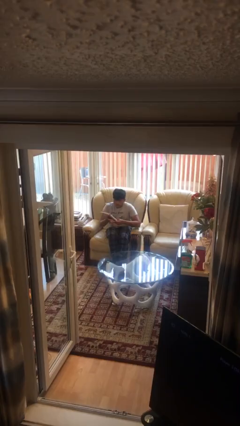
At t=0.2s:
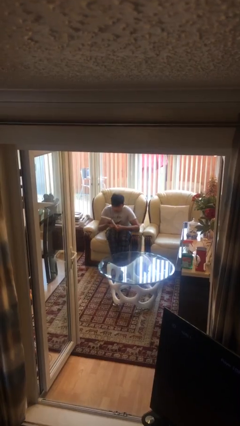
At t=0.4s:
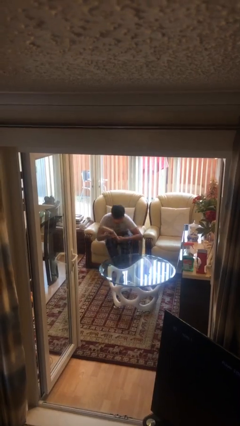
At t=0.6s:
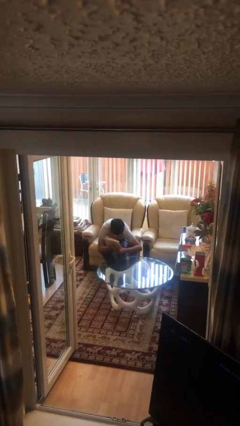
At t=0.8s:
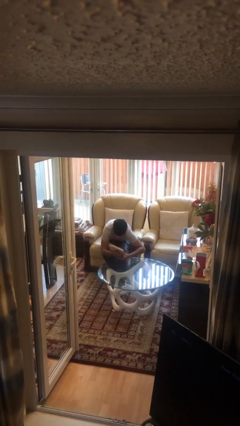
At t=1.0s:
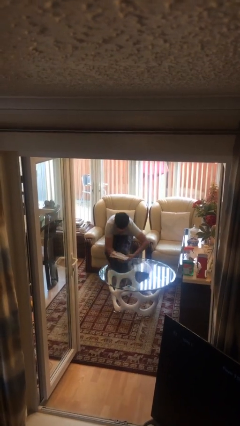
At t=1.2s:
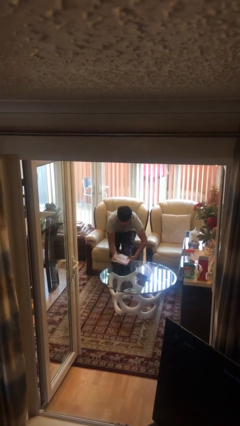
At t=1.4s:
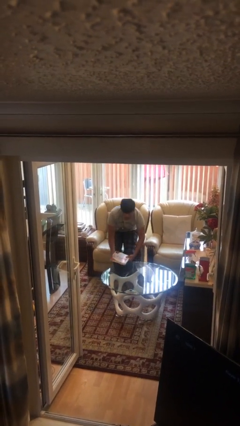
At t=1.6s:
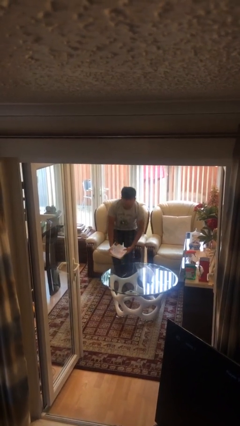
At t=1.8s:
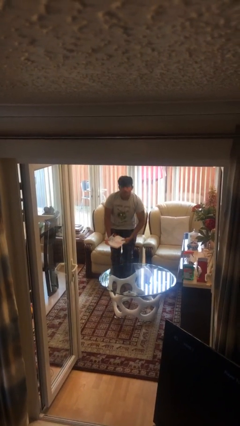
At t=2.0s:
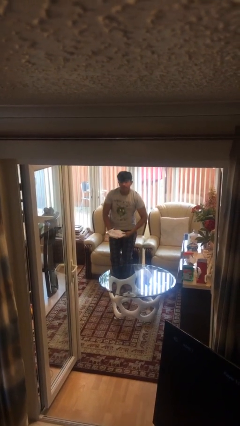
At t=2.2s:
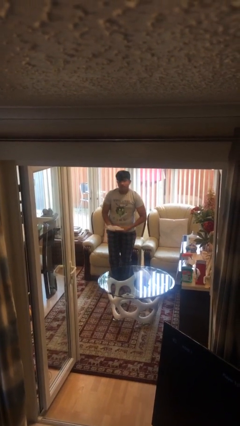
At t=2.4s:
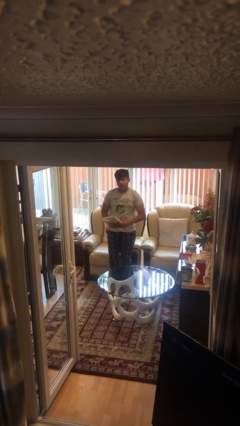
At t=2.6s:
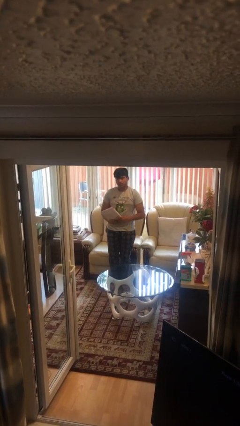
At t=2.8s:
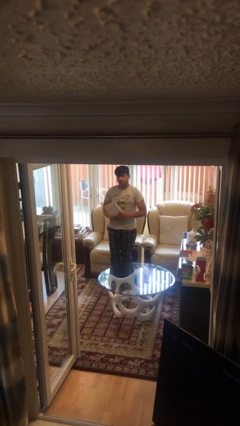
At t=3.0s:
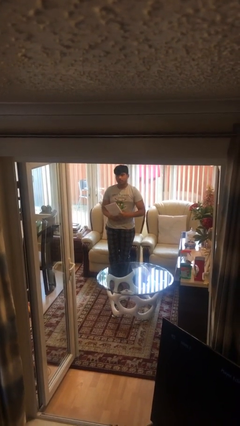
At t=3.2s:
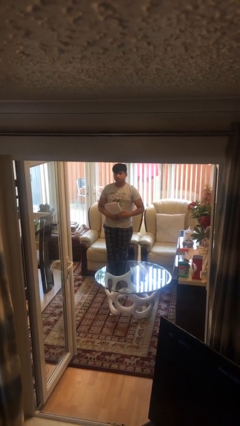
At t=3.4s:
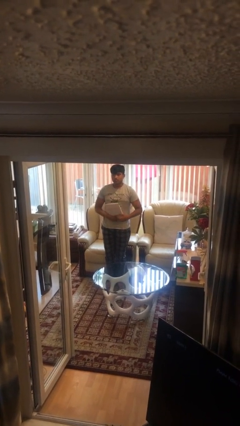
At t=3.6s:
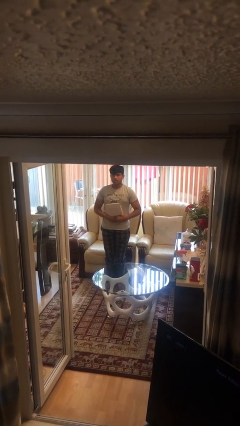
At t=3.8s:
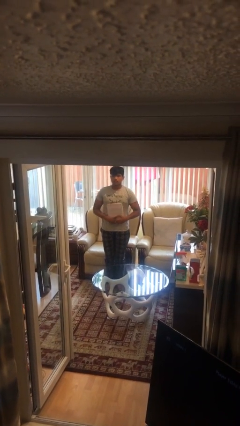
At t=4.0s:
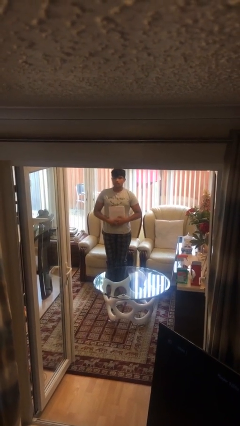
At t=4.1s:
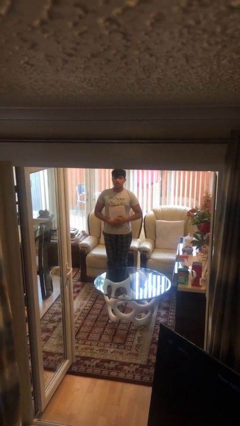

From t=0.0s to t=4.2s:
person stands up

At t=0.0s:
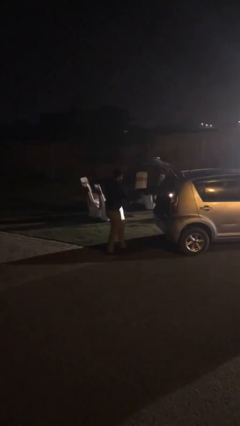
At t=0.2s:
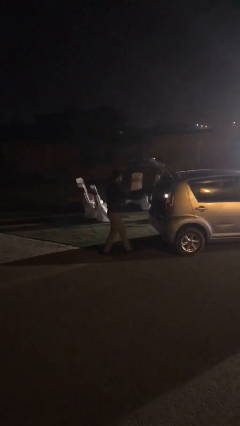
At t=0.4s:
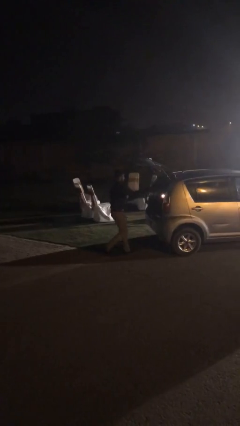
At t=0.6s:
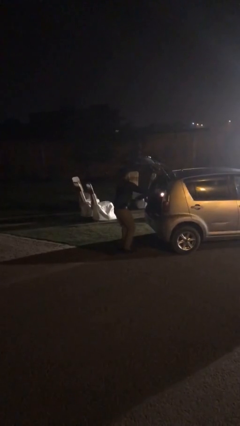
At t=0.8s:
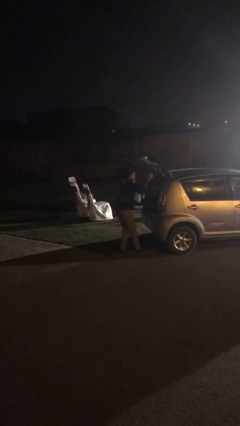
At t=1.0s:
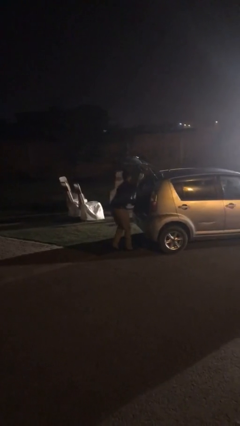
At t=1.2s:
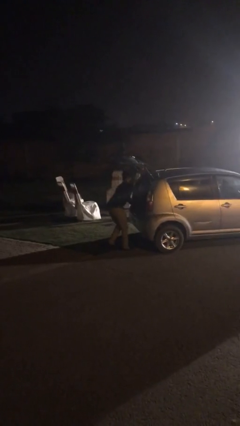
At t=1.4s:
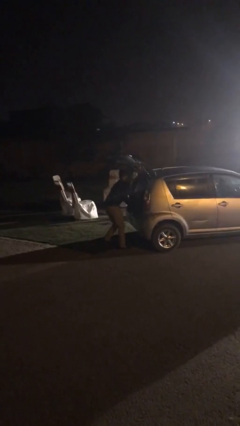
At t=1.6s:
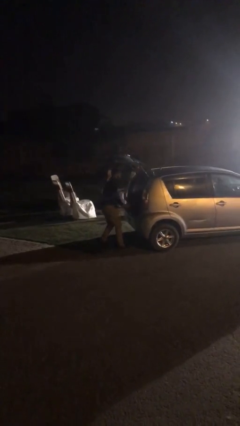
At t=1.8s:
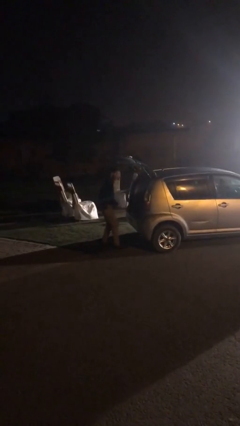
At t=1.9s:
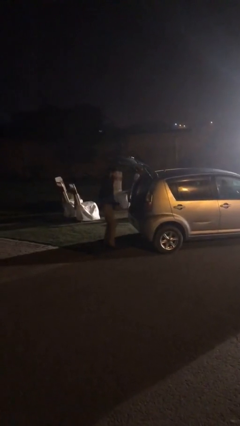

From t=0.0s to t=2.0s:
person loads car

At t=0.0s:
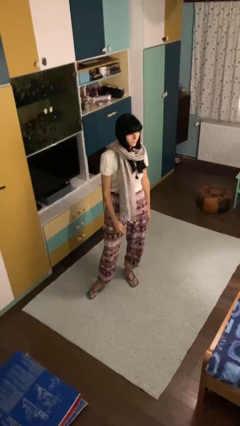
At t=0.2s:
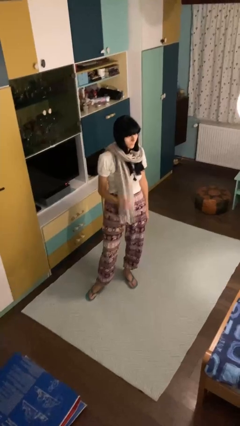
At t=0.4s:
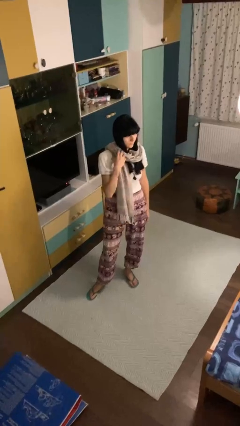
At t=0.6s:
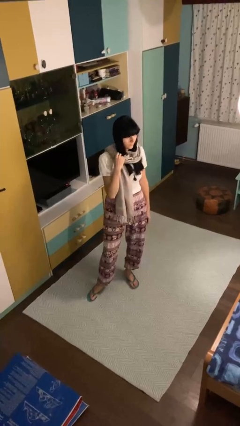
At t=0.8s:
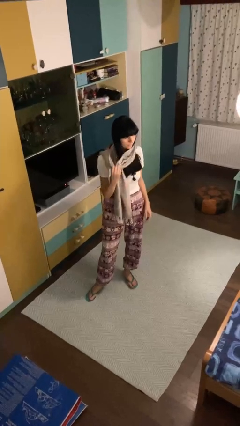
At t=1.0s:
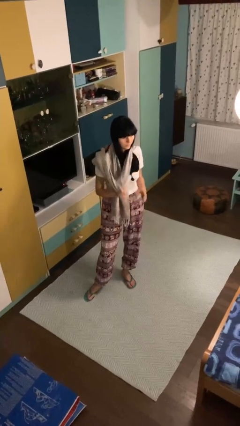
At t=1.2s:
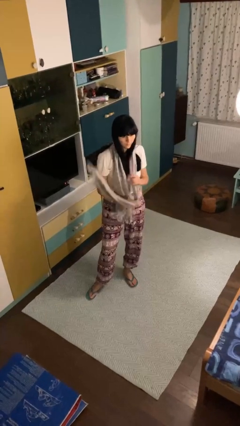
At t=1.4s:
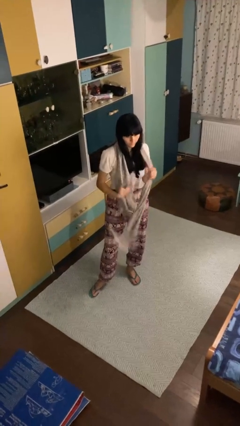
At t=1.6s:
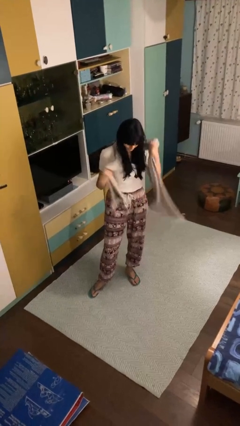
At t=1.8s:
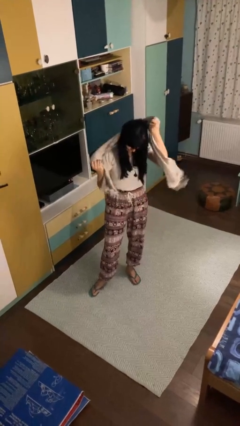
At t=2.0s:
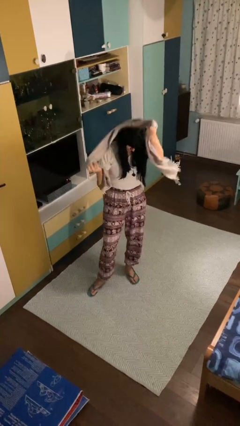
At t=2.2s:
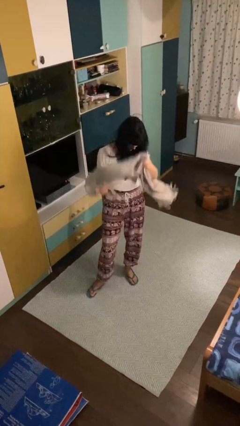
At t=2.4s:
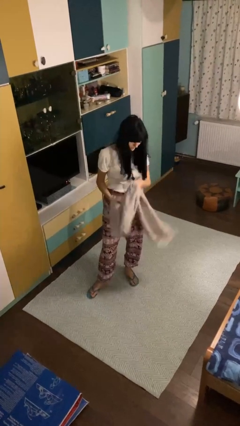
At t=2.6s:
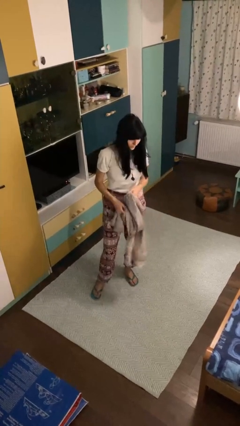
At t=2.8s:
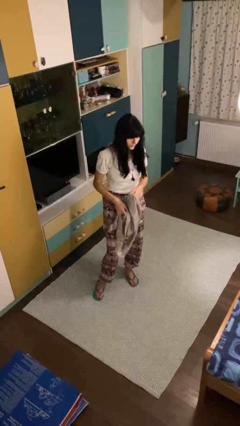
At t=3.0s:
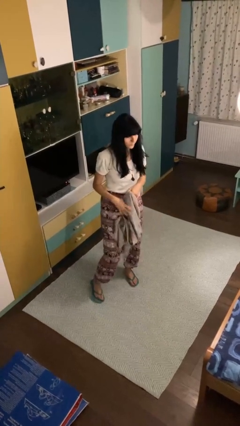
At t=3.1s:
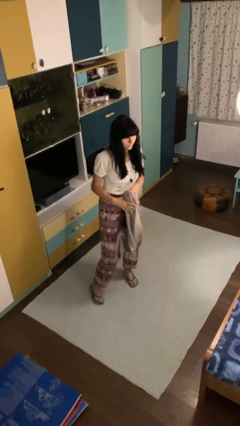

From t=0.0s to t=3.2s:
person takes off scarf

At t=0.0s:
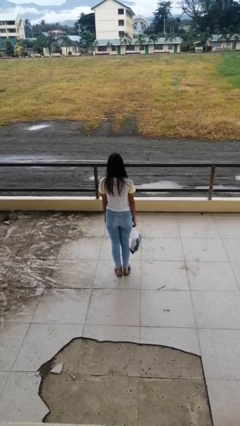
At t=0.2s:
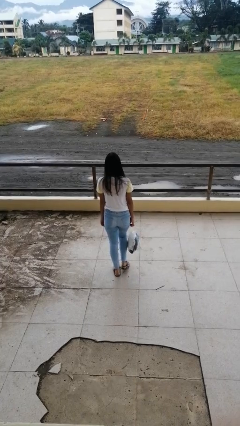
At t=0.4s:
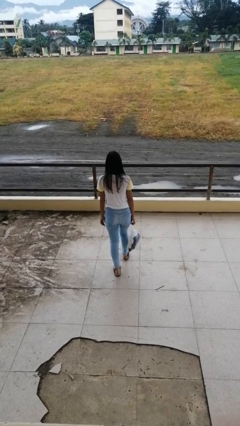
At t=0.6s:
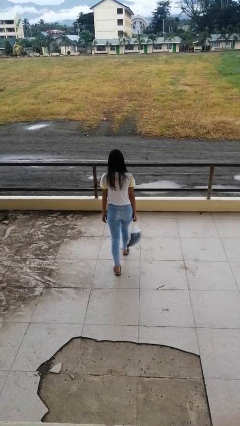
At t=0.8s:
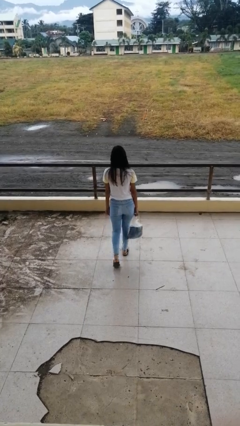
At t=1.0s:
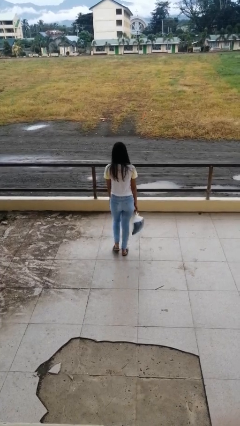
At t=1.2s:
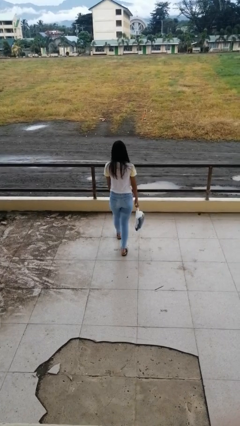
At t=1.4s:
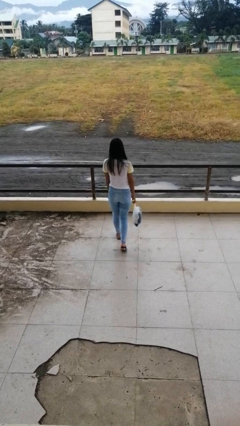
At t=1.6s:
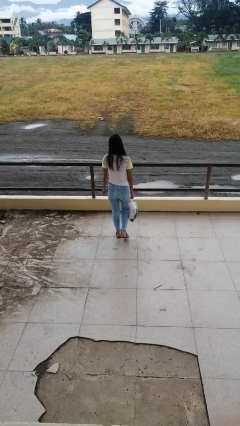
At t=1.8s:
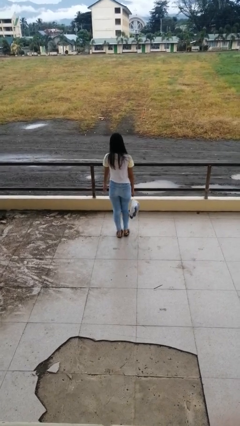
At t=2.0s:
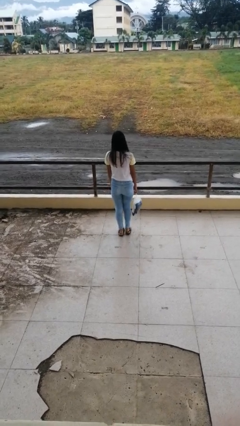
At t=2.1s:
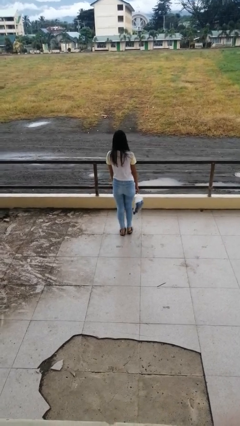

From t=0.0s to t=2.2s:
person carries groceries

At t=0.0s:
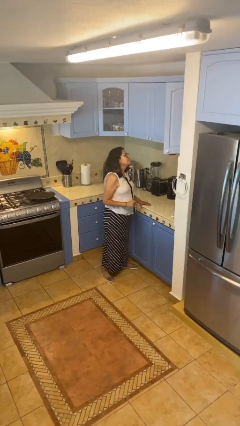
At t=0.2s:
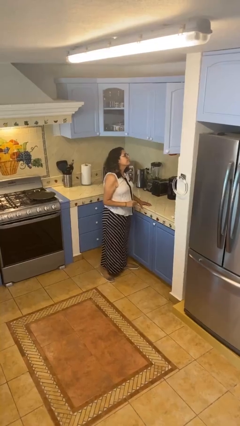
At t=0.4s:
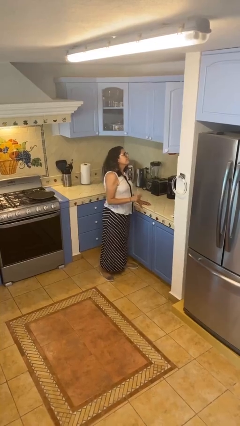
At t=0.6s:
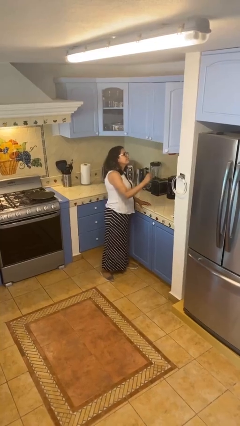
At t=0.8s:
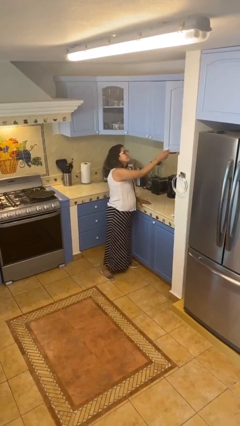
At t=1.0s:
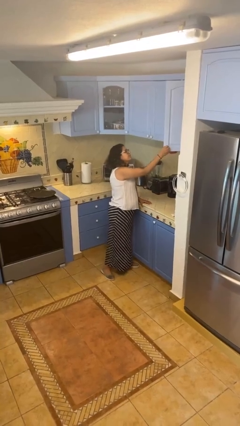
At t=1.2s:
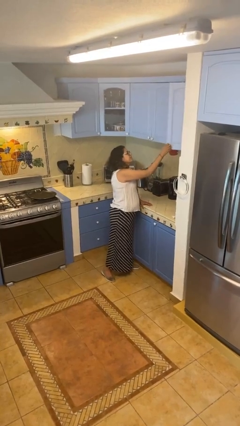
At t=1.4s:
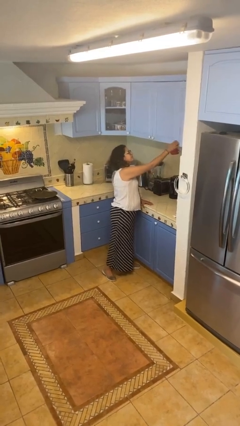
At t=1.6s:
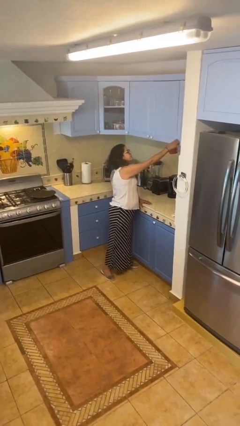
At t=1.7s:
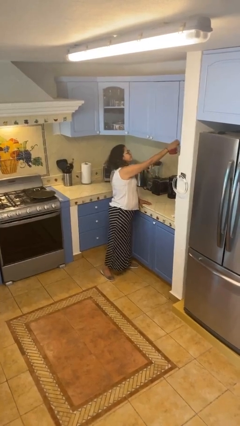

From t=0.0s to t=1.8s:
person closes cabinet

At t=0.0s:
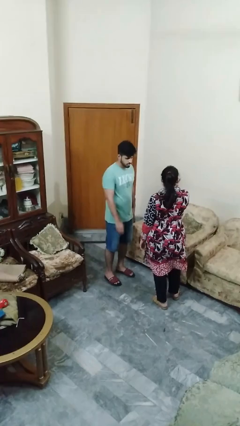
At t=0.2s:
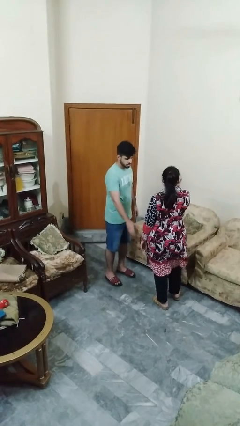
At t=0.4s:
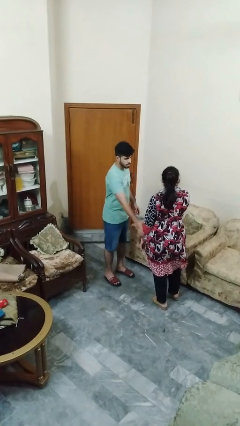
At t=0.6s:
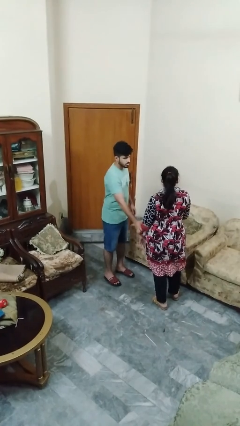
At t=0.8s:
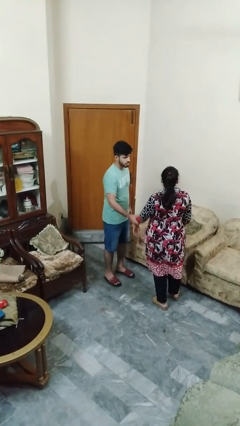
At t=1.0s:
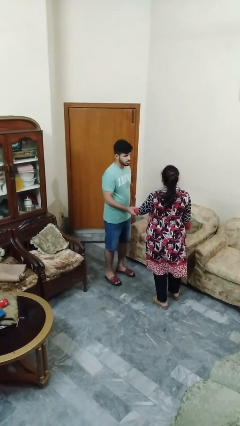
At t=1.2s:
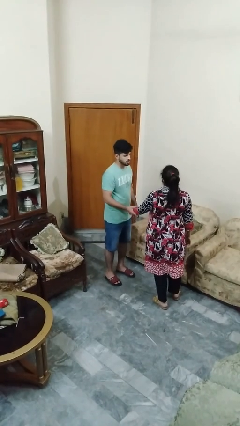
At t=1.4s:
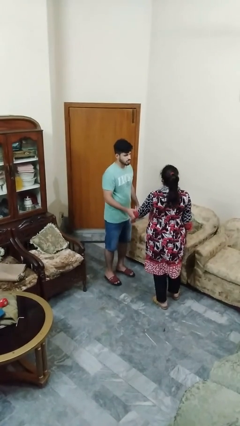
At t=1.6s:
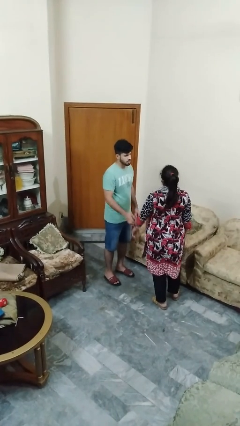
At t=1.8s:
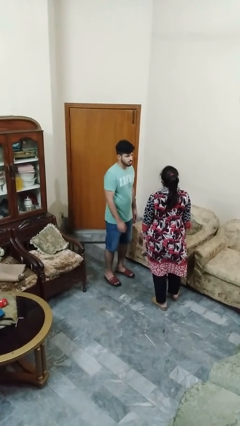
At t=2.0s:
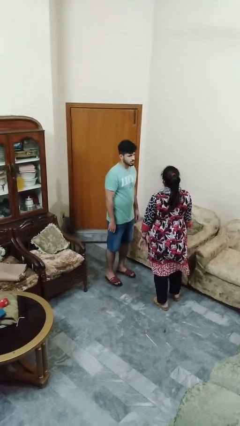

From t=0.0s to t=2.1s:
person grabs person by forearm

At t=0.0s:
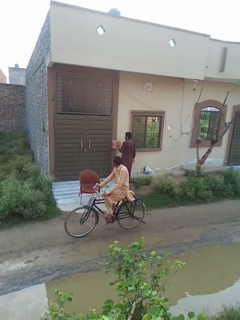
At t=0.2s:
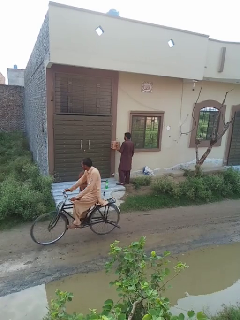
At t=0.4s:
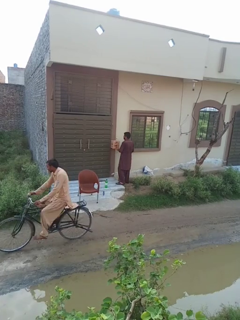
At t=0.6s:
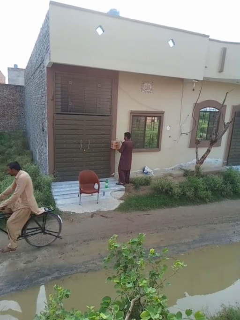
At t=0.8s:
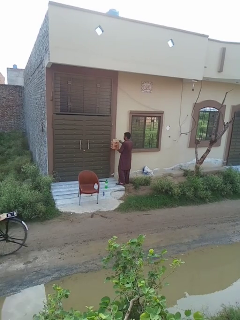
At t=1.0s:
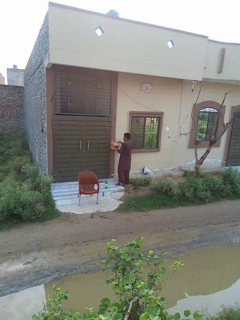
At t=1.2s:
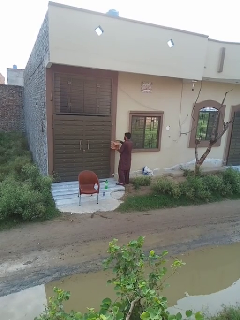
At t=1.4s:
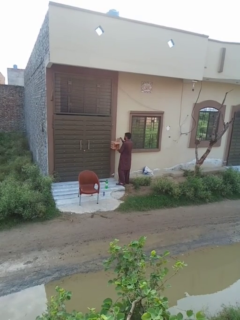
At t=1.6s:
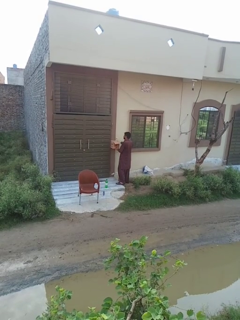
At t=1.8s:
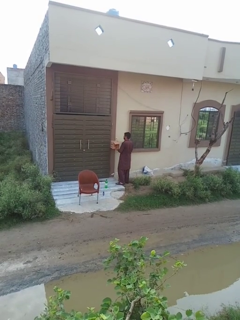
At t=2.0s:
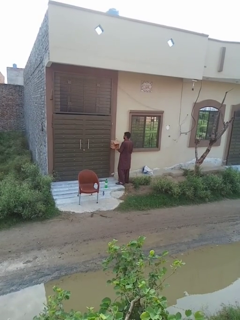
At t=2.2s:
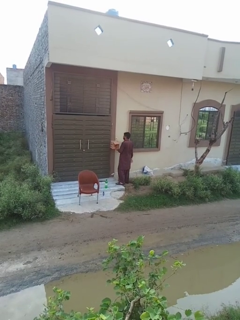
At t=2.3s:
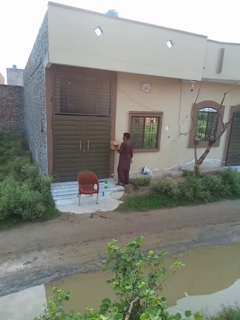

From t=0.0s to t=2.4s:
person opens mailbox
